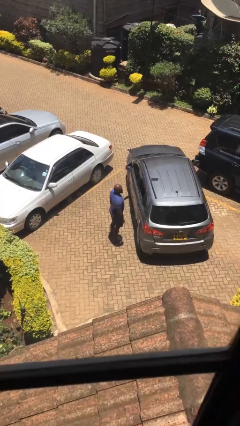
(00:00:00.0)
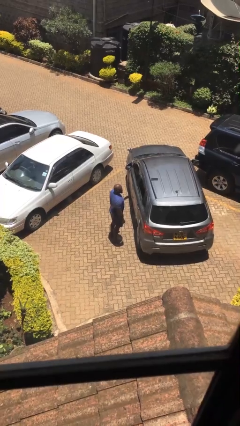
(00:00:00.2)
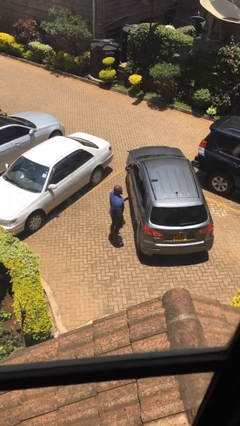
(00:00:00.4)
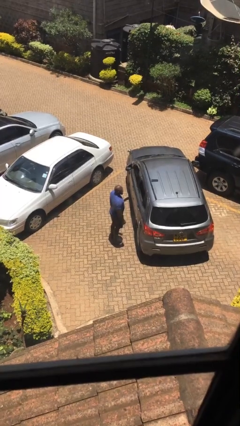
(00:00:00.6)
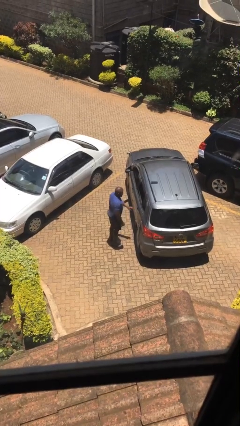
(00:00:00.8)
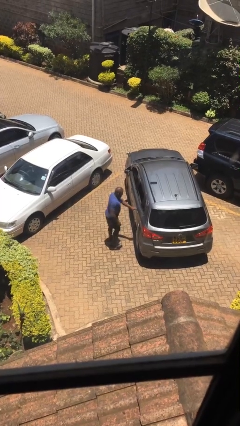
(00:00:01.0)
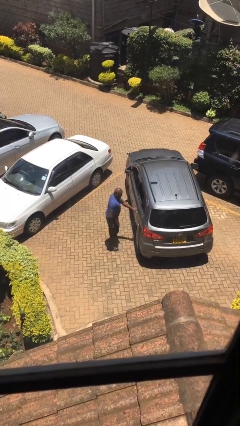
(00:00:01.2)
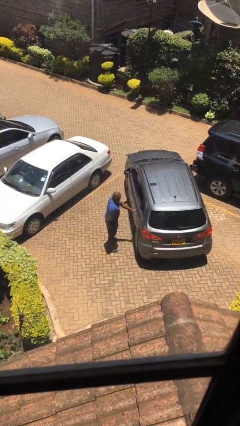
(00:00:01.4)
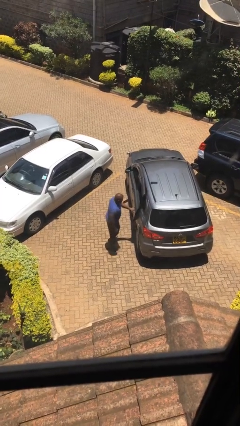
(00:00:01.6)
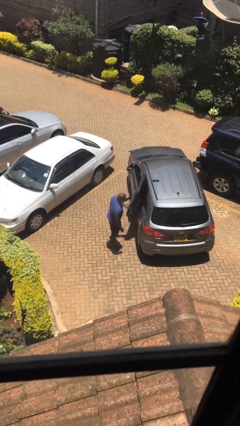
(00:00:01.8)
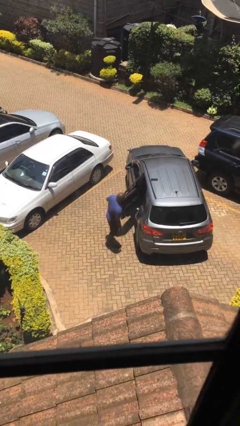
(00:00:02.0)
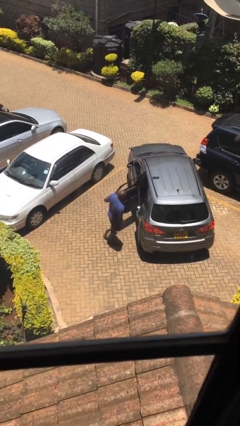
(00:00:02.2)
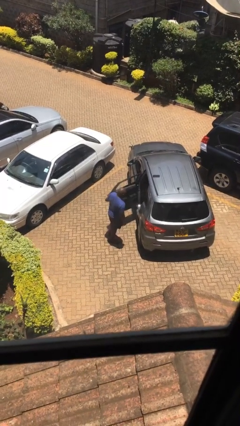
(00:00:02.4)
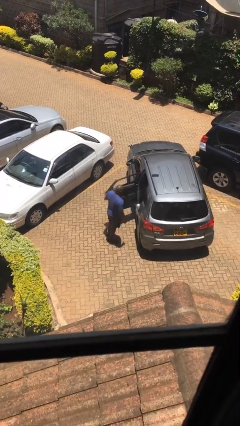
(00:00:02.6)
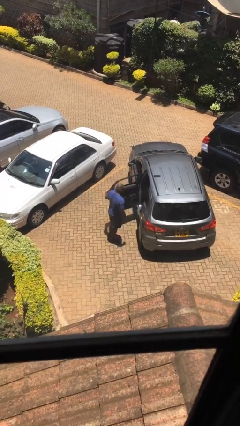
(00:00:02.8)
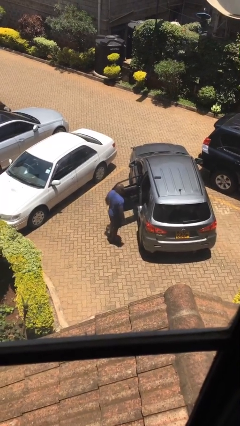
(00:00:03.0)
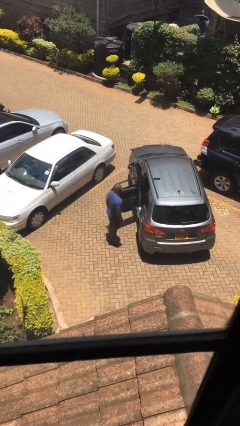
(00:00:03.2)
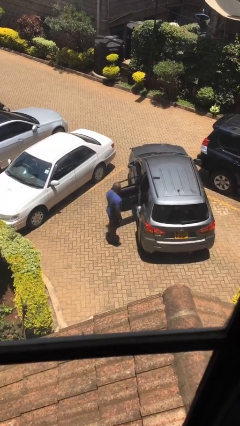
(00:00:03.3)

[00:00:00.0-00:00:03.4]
person opens car door

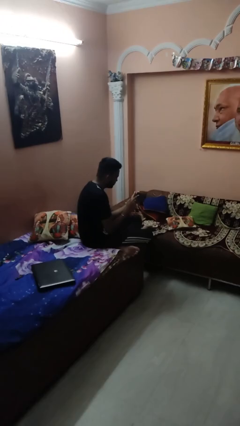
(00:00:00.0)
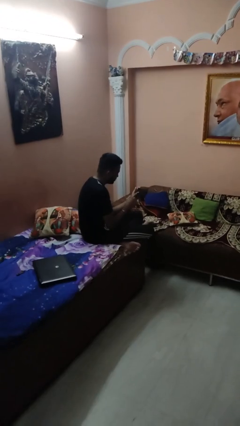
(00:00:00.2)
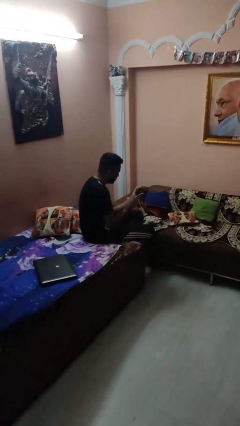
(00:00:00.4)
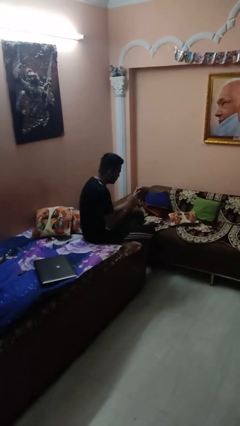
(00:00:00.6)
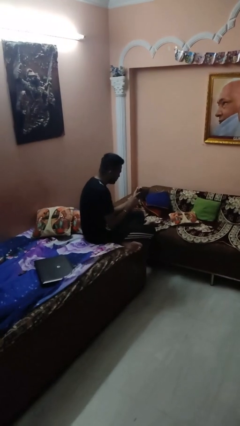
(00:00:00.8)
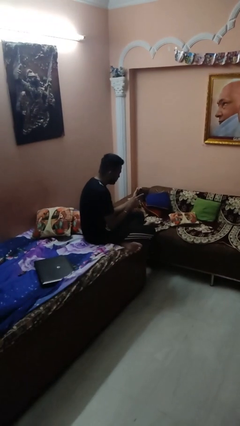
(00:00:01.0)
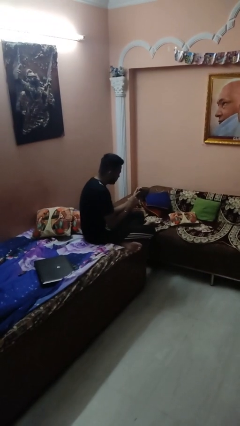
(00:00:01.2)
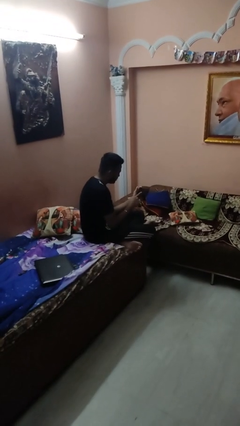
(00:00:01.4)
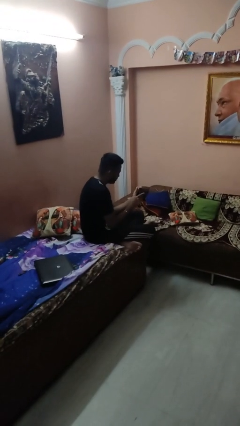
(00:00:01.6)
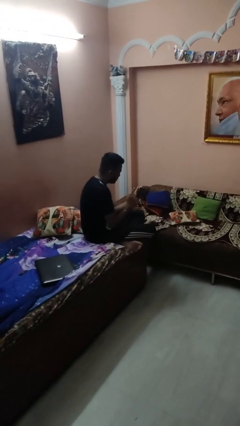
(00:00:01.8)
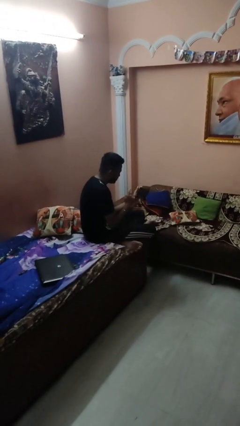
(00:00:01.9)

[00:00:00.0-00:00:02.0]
person interacts with tablet

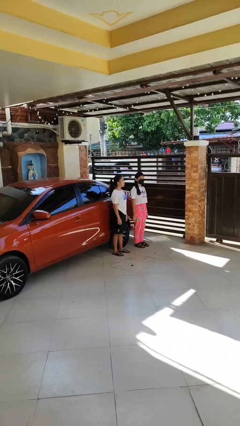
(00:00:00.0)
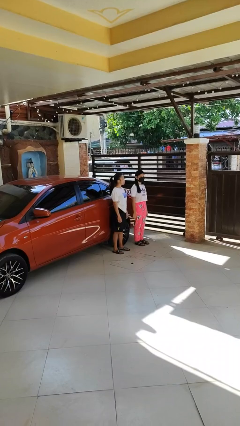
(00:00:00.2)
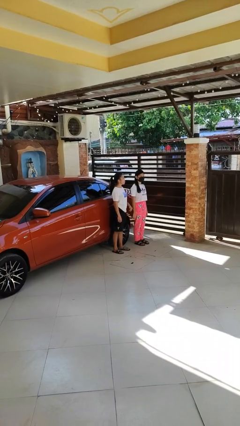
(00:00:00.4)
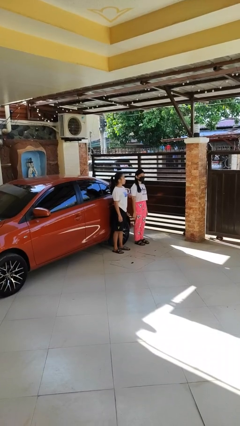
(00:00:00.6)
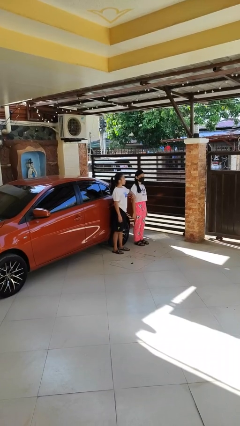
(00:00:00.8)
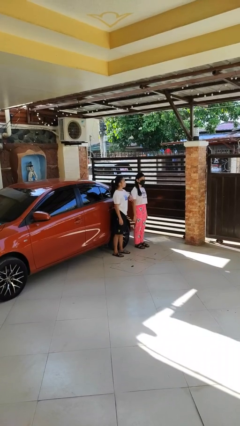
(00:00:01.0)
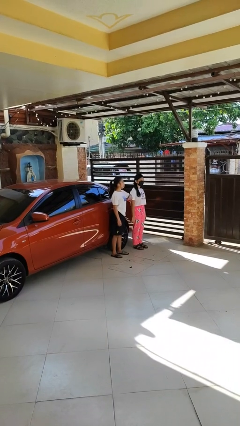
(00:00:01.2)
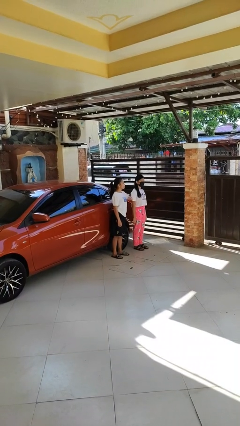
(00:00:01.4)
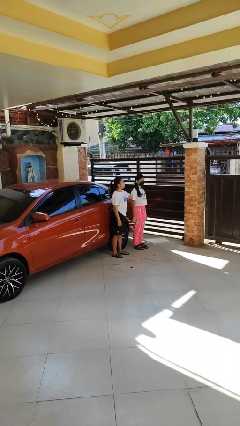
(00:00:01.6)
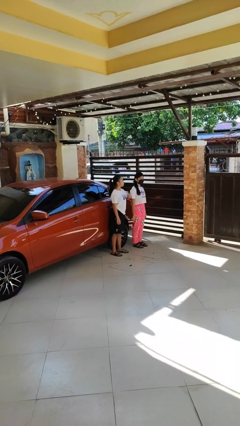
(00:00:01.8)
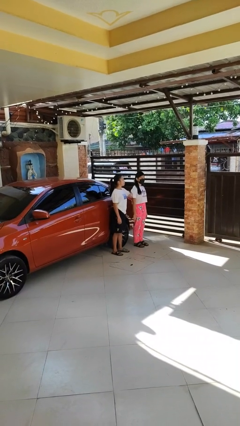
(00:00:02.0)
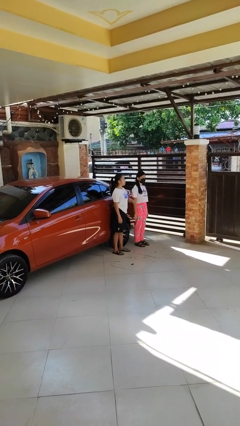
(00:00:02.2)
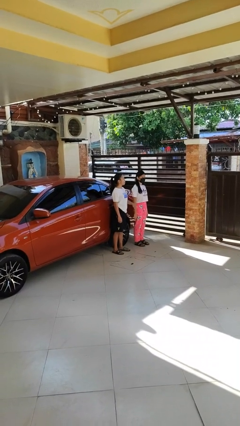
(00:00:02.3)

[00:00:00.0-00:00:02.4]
person nudges person with elbow

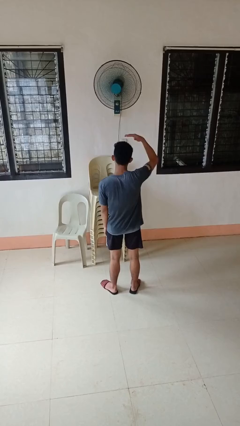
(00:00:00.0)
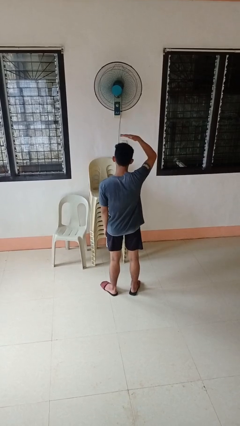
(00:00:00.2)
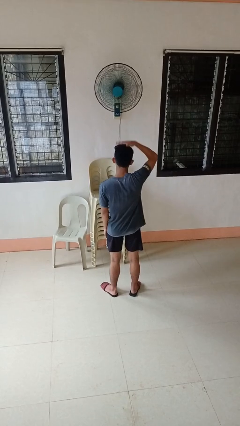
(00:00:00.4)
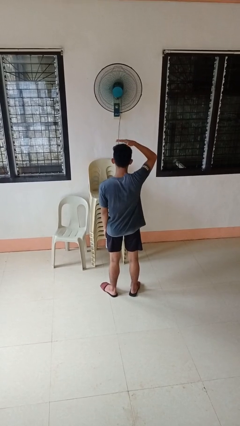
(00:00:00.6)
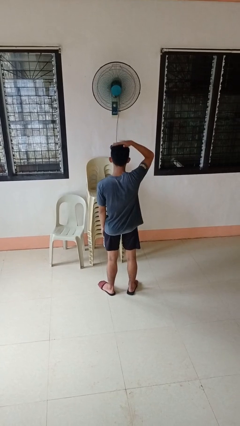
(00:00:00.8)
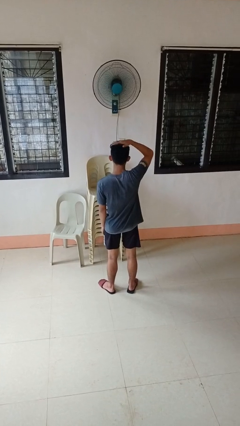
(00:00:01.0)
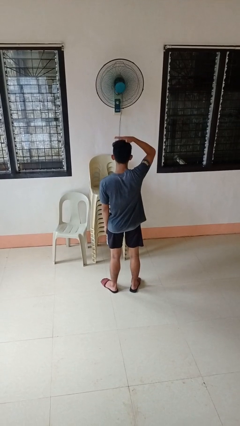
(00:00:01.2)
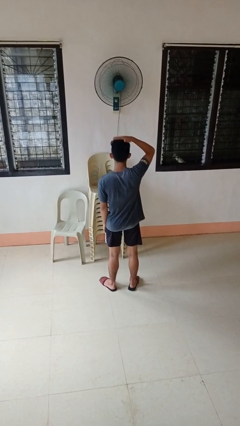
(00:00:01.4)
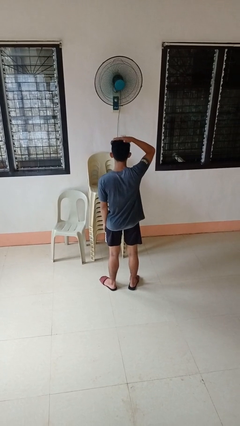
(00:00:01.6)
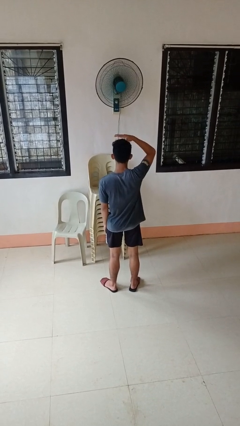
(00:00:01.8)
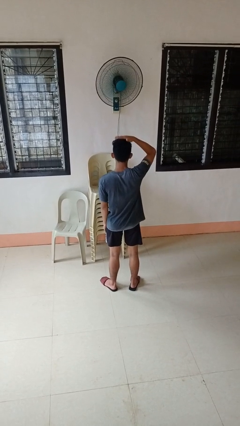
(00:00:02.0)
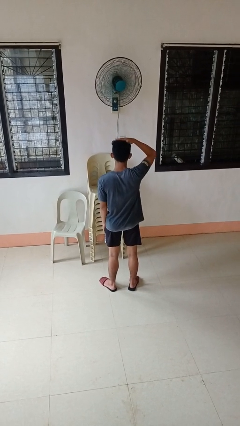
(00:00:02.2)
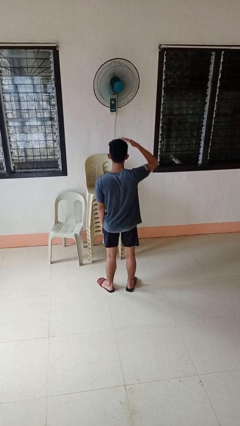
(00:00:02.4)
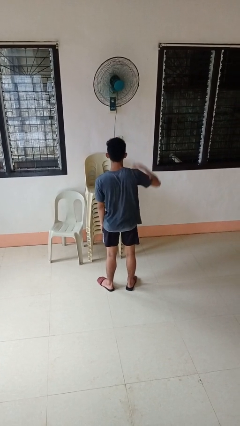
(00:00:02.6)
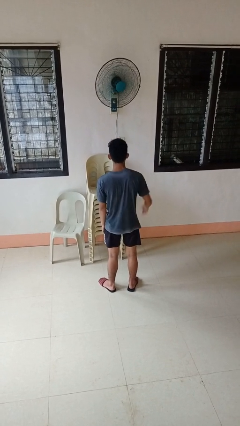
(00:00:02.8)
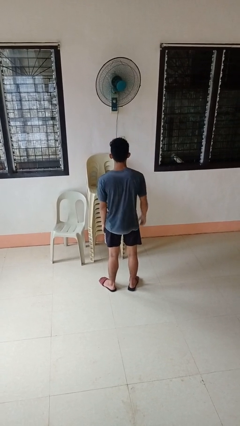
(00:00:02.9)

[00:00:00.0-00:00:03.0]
person pats head

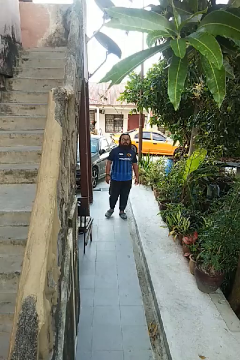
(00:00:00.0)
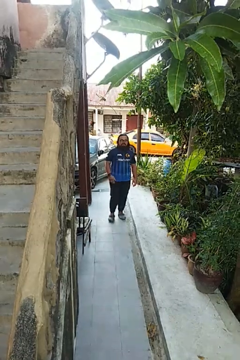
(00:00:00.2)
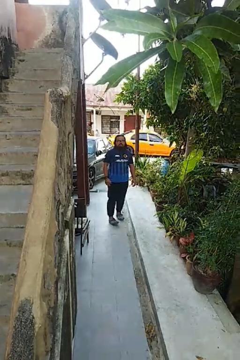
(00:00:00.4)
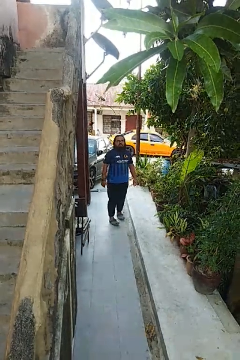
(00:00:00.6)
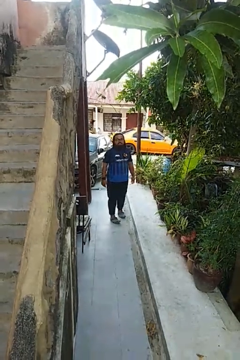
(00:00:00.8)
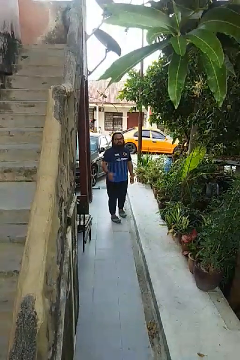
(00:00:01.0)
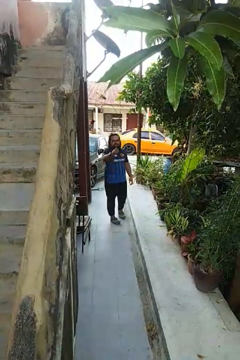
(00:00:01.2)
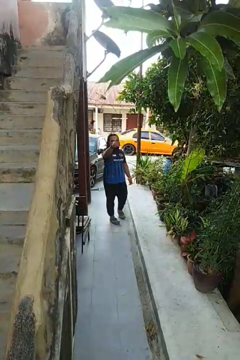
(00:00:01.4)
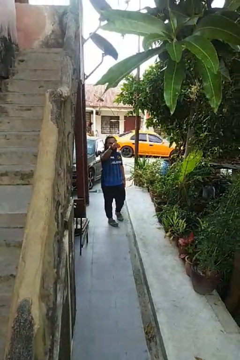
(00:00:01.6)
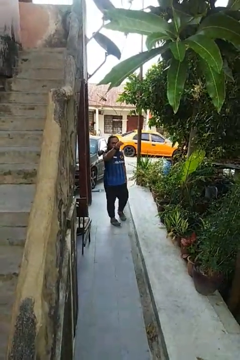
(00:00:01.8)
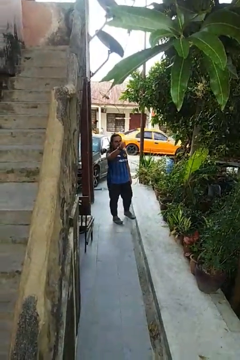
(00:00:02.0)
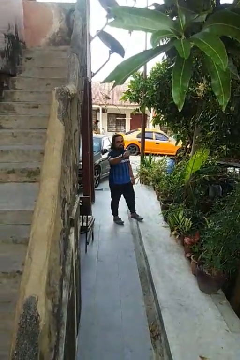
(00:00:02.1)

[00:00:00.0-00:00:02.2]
person gestures come here

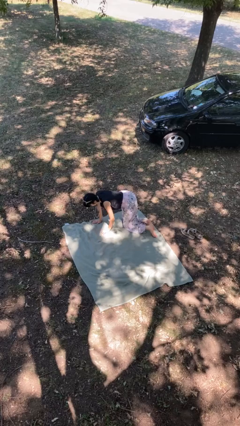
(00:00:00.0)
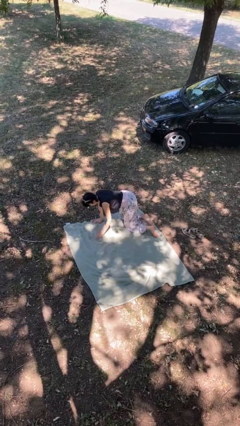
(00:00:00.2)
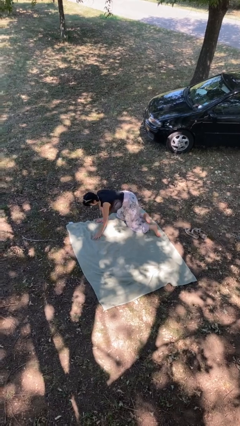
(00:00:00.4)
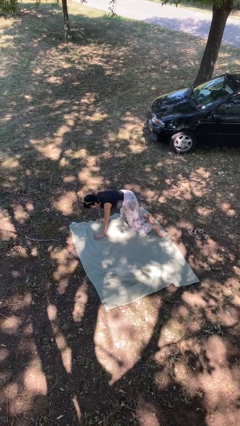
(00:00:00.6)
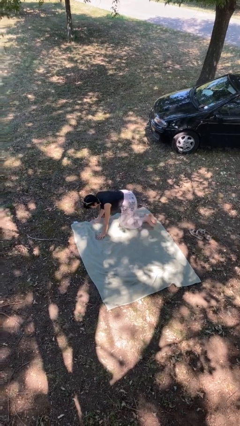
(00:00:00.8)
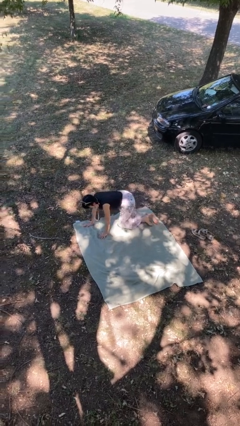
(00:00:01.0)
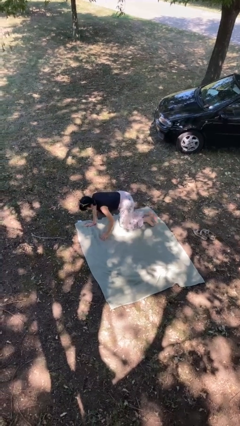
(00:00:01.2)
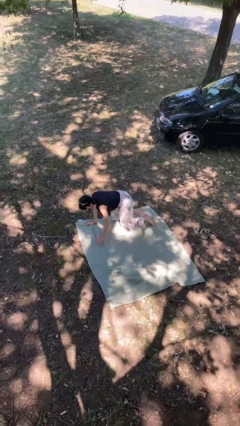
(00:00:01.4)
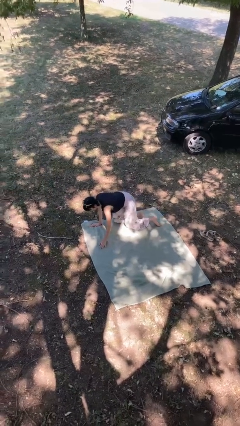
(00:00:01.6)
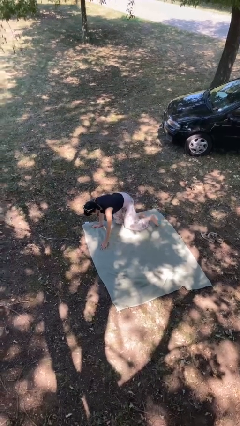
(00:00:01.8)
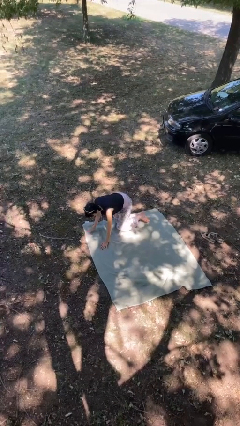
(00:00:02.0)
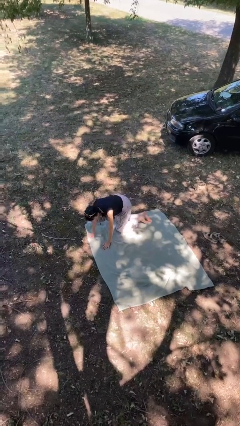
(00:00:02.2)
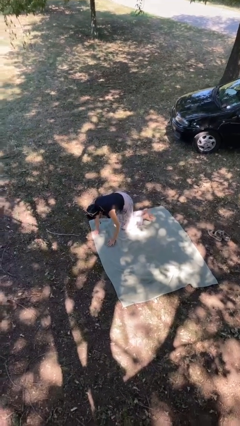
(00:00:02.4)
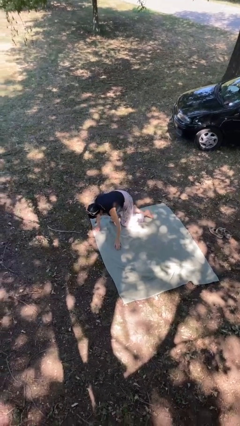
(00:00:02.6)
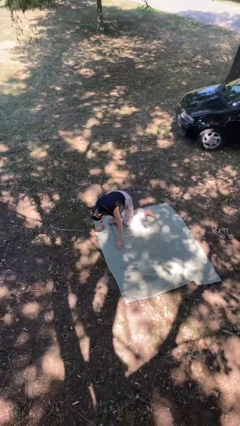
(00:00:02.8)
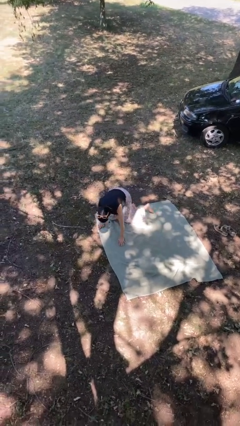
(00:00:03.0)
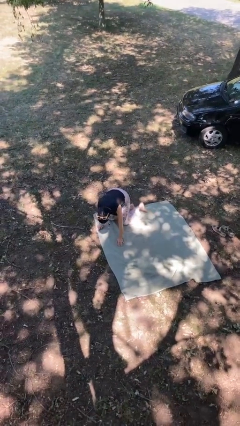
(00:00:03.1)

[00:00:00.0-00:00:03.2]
person crawls

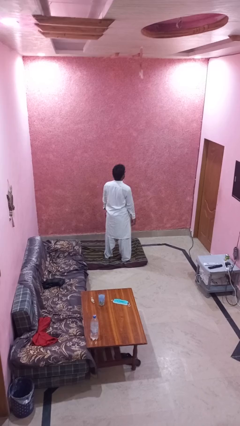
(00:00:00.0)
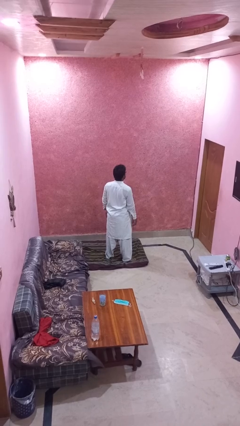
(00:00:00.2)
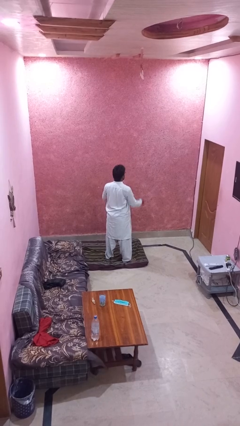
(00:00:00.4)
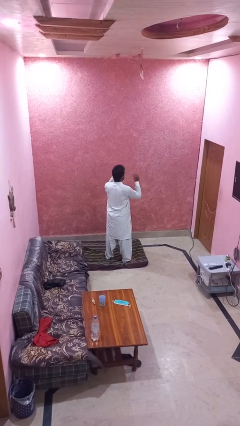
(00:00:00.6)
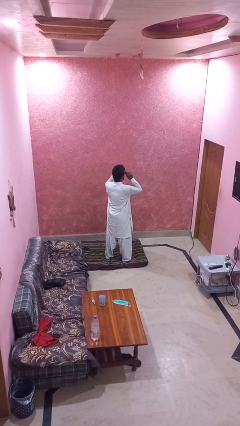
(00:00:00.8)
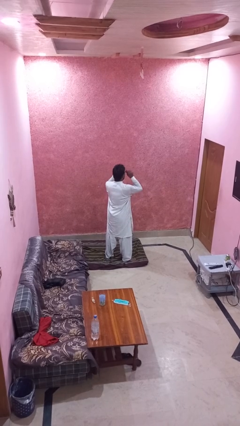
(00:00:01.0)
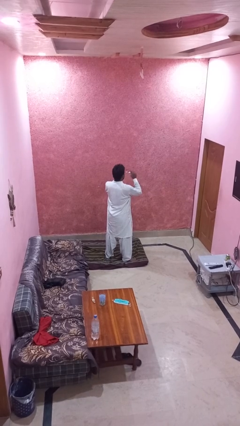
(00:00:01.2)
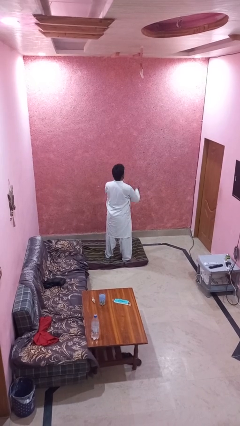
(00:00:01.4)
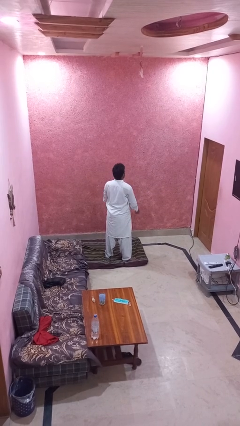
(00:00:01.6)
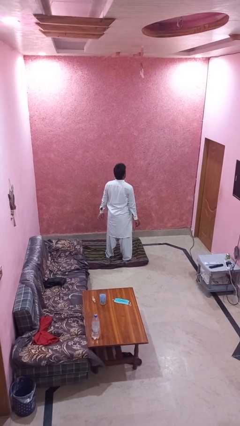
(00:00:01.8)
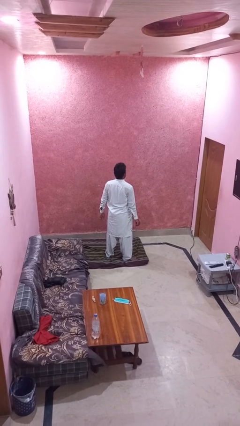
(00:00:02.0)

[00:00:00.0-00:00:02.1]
person takes off glasses
